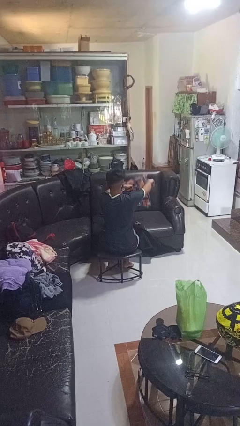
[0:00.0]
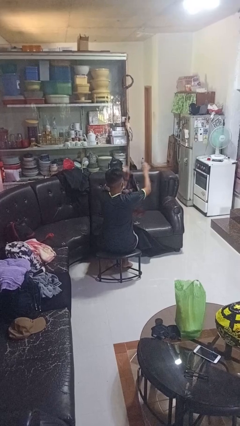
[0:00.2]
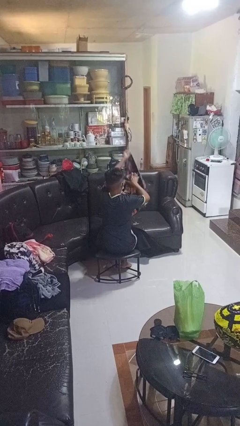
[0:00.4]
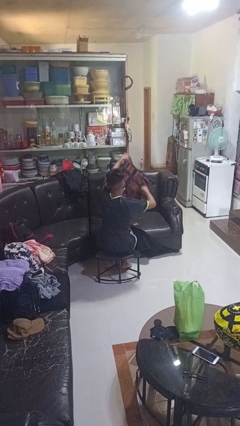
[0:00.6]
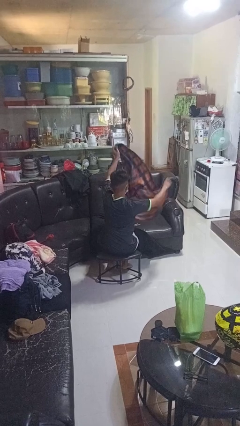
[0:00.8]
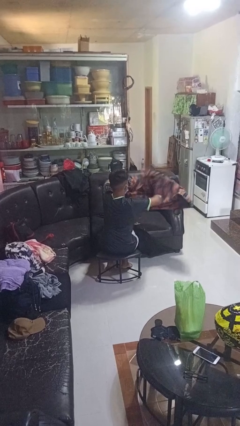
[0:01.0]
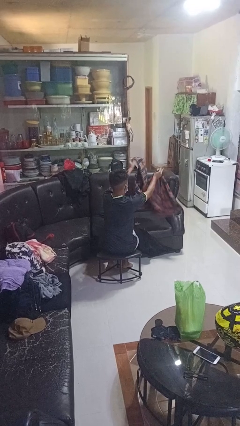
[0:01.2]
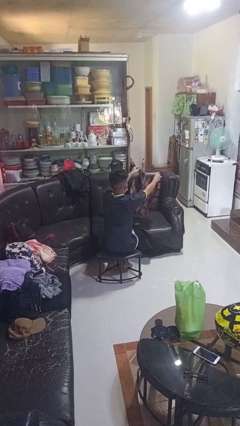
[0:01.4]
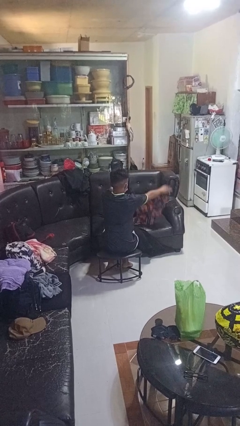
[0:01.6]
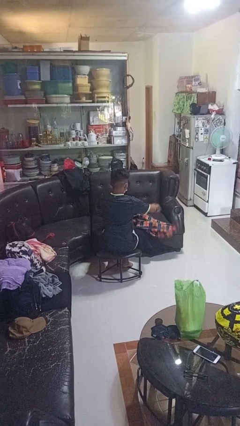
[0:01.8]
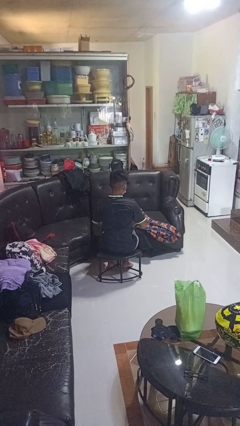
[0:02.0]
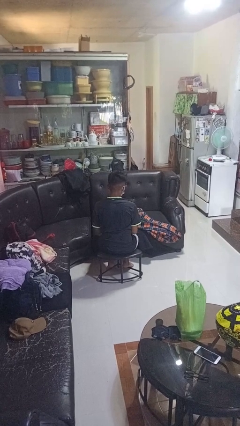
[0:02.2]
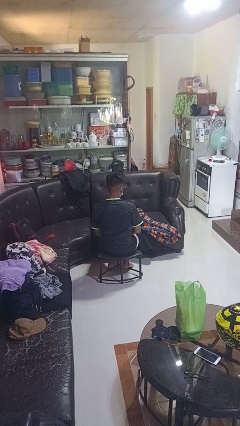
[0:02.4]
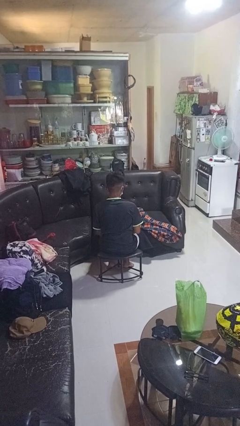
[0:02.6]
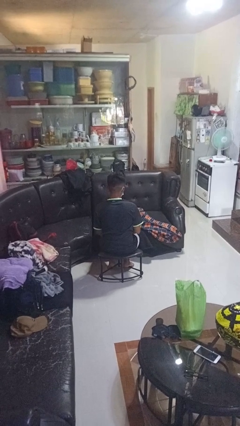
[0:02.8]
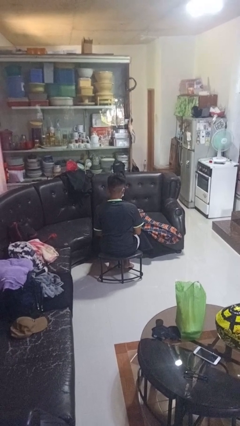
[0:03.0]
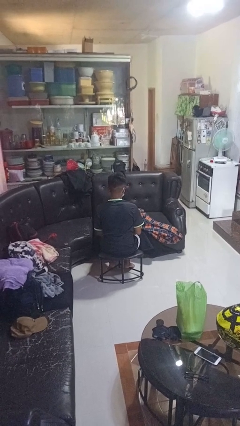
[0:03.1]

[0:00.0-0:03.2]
person unfolds blanket

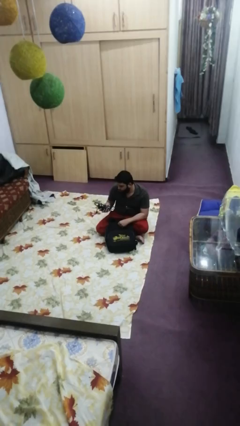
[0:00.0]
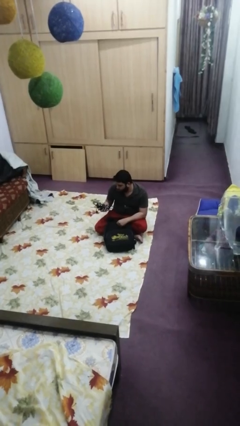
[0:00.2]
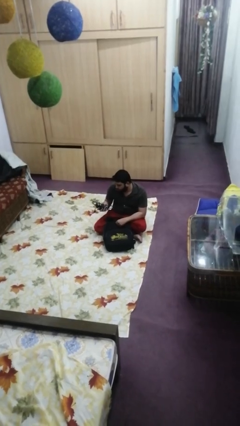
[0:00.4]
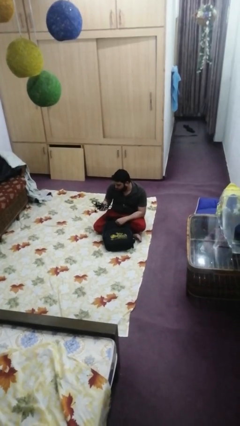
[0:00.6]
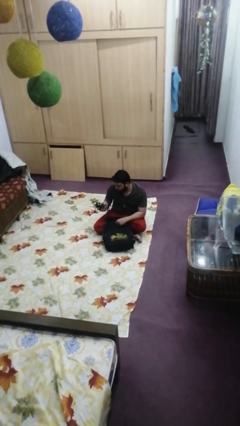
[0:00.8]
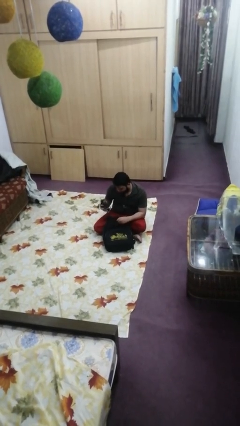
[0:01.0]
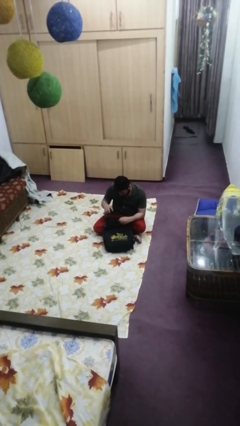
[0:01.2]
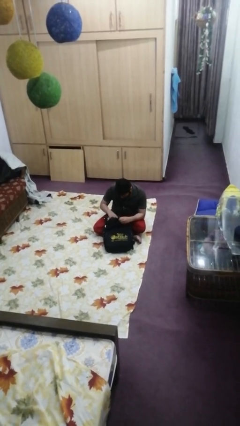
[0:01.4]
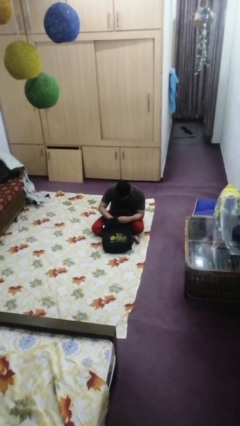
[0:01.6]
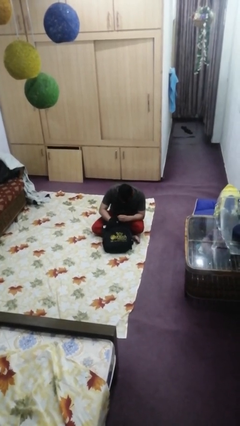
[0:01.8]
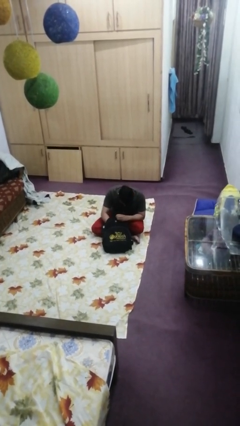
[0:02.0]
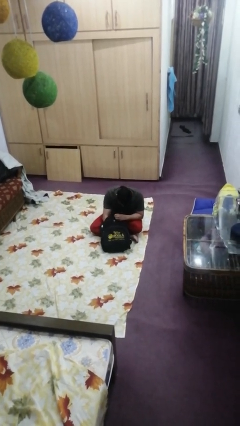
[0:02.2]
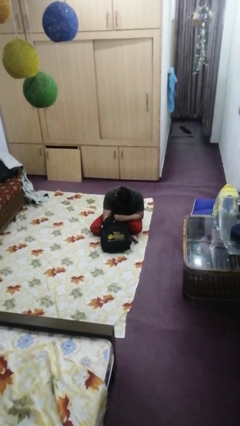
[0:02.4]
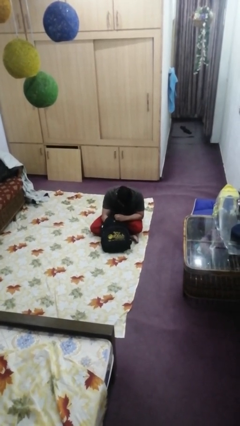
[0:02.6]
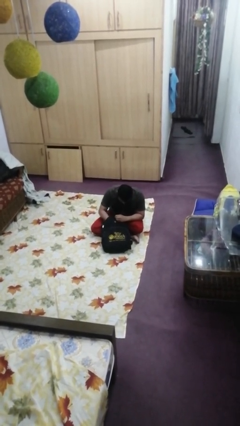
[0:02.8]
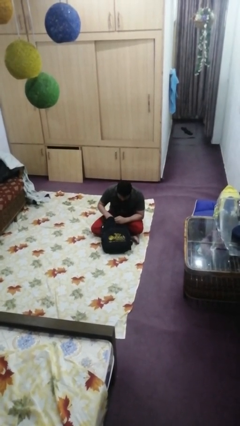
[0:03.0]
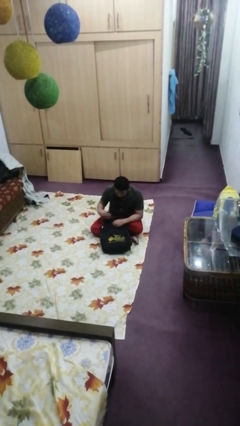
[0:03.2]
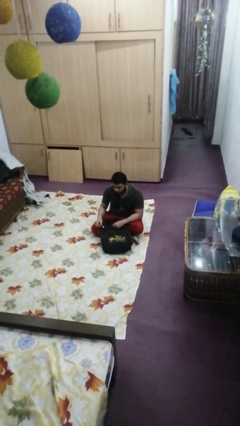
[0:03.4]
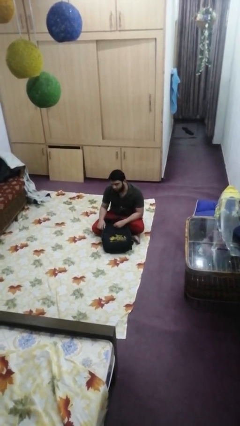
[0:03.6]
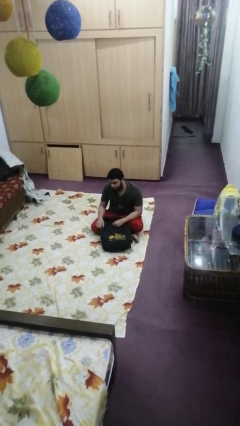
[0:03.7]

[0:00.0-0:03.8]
person puts object into backpack

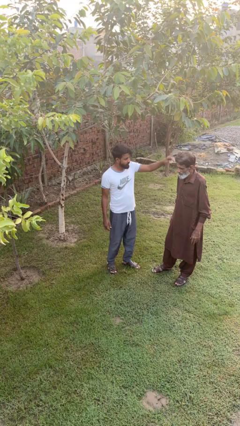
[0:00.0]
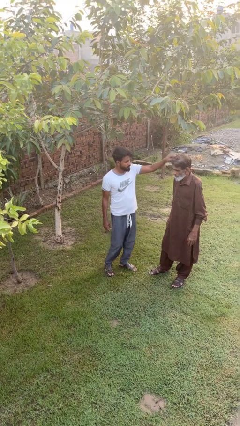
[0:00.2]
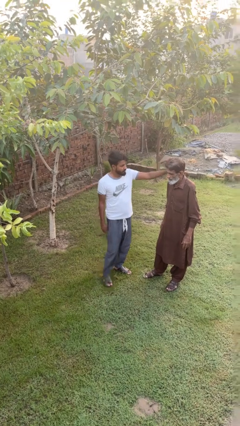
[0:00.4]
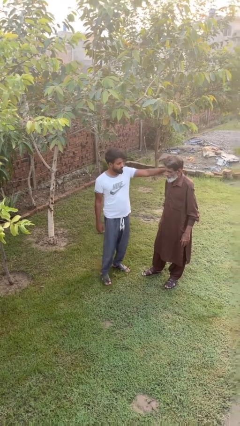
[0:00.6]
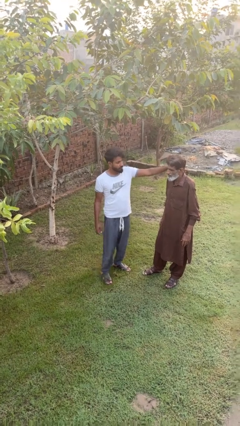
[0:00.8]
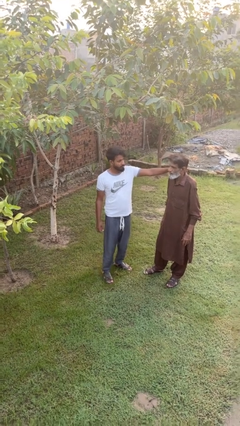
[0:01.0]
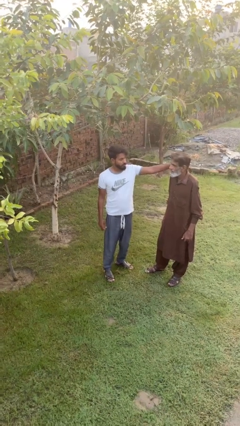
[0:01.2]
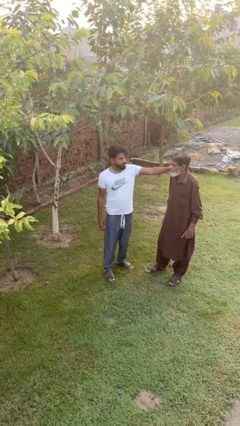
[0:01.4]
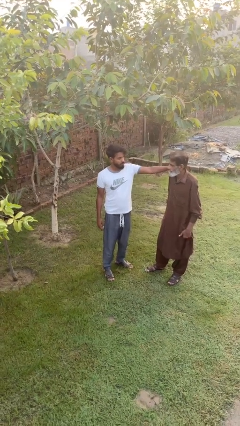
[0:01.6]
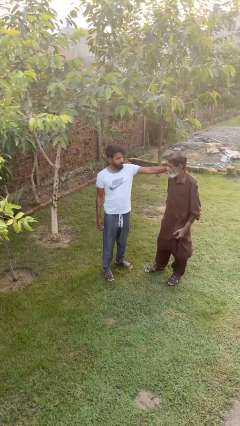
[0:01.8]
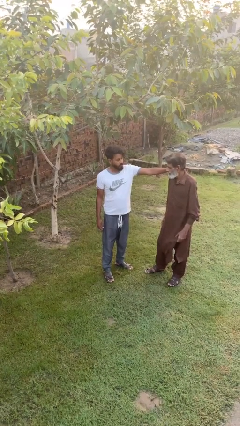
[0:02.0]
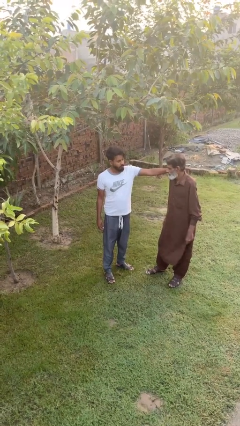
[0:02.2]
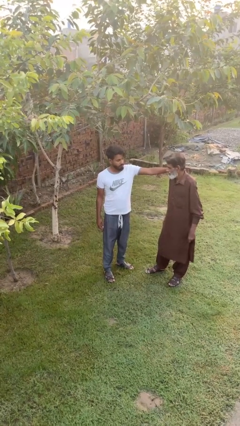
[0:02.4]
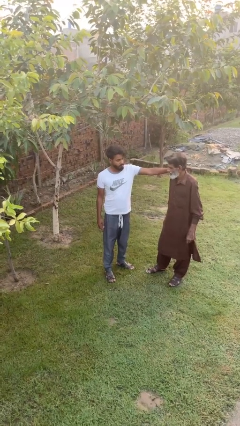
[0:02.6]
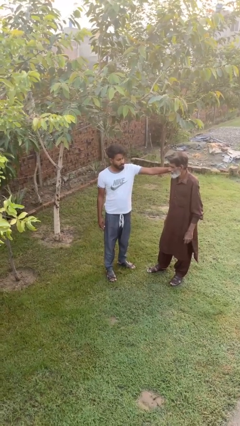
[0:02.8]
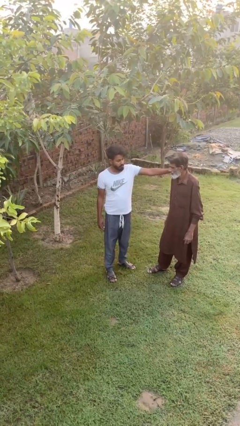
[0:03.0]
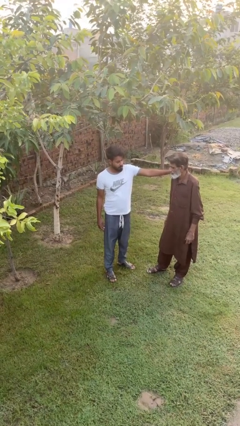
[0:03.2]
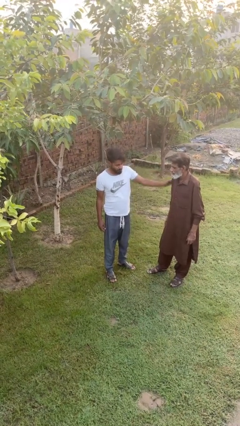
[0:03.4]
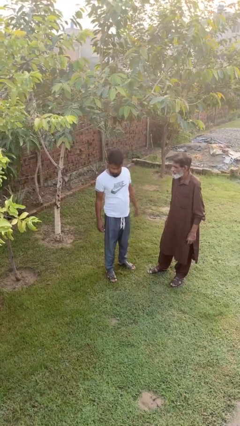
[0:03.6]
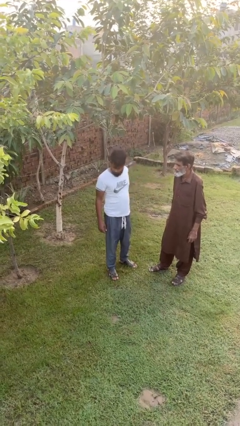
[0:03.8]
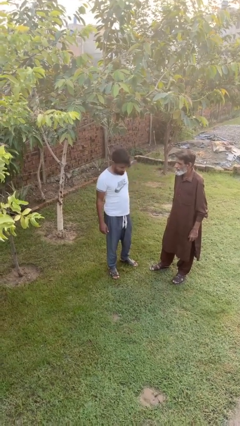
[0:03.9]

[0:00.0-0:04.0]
person pounds shoulders of person

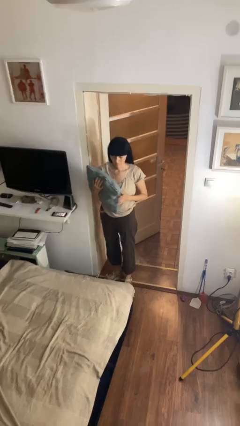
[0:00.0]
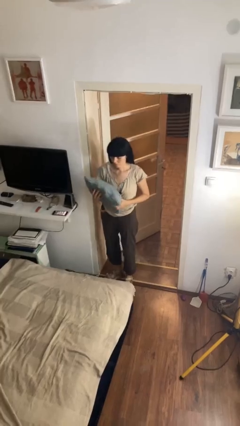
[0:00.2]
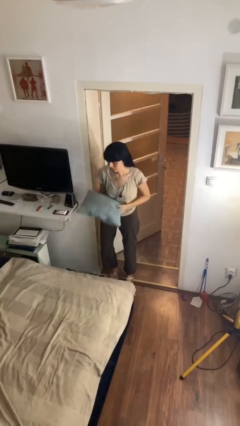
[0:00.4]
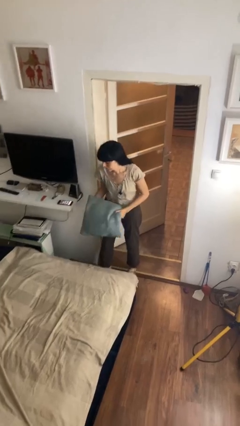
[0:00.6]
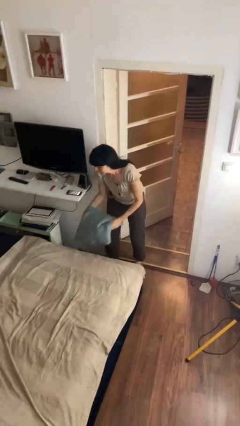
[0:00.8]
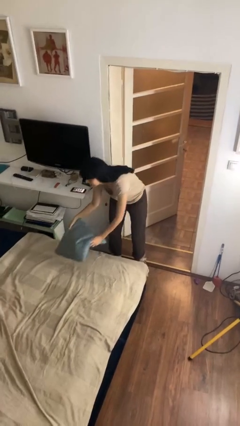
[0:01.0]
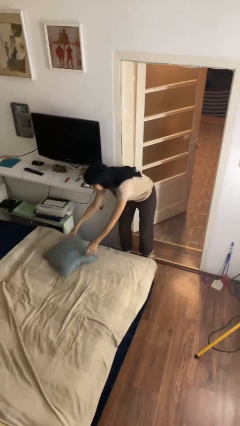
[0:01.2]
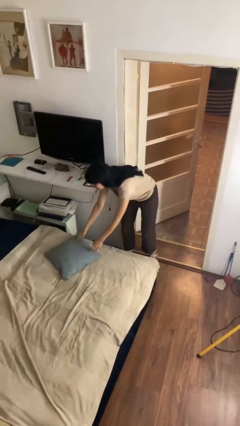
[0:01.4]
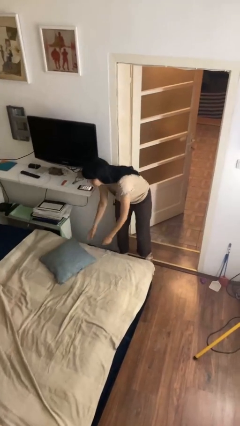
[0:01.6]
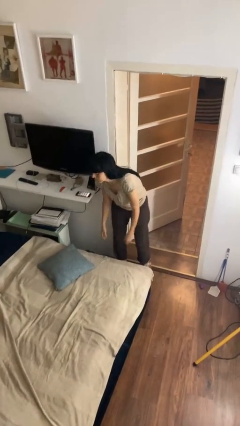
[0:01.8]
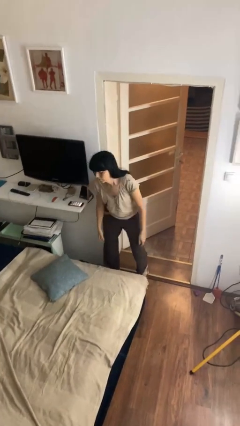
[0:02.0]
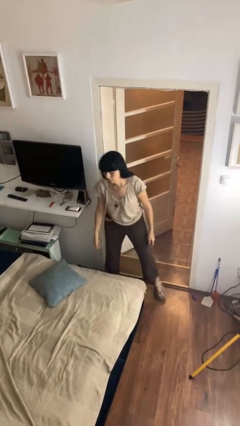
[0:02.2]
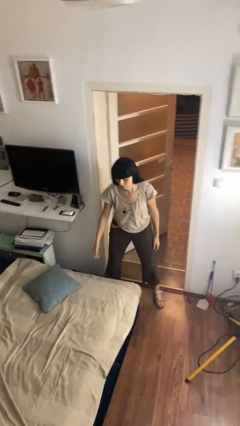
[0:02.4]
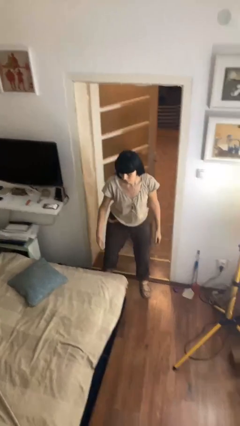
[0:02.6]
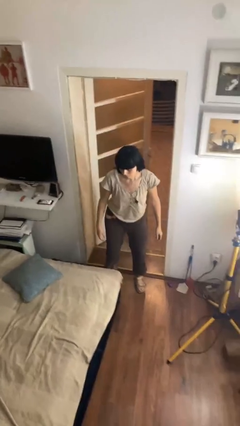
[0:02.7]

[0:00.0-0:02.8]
person puts down object on bed

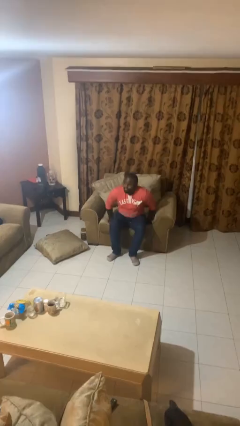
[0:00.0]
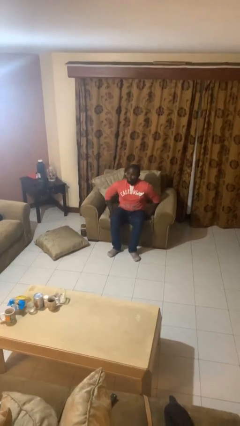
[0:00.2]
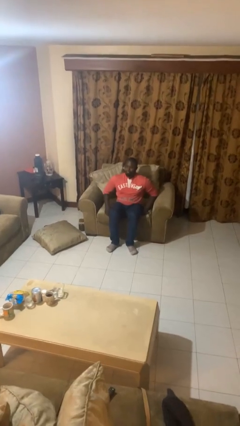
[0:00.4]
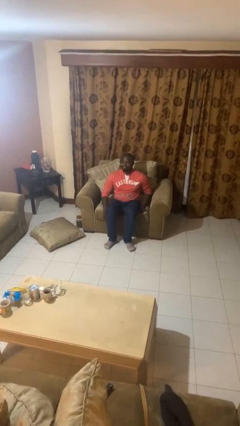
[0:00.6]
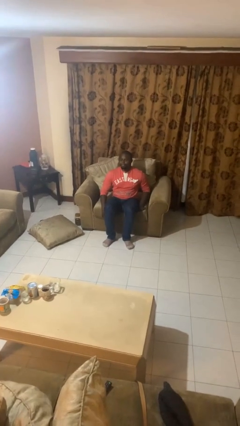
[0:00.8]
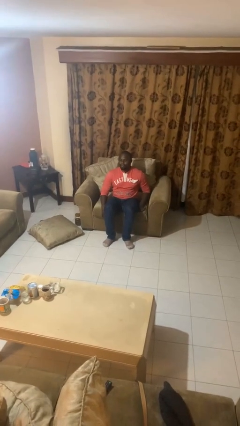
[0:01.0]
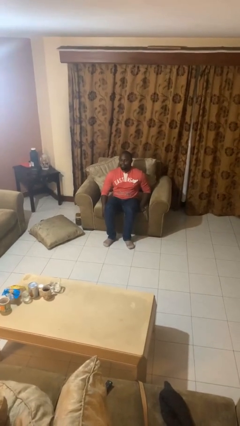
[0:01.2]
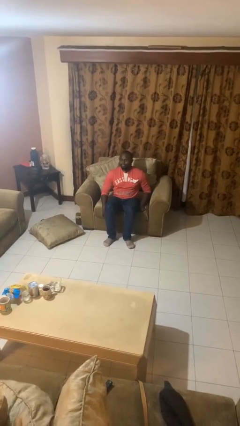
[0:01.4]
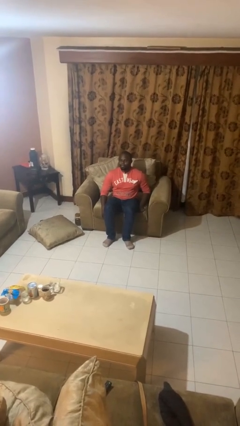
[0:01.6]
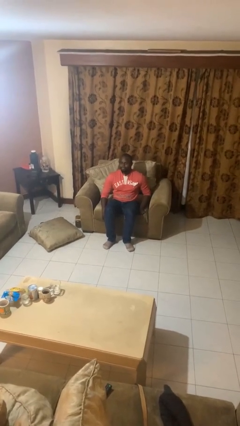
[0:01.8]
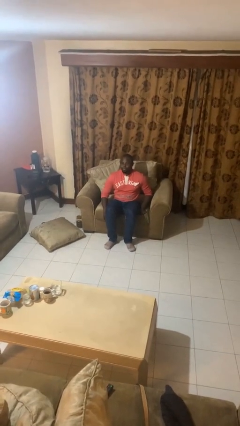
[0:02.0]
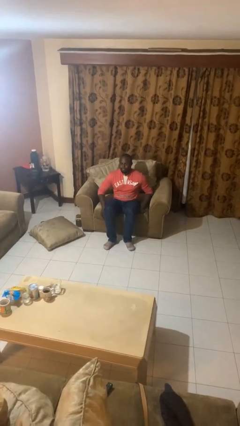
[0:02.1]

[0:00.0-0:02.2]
person sits down

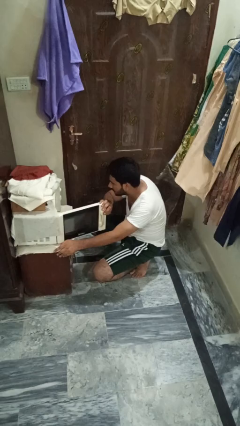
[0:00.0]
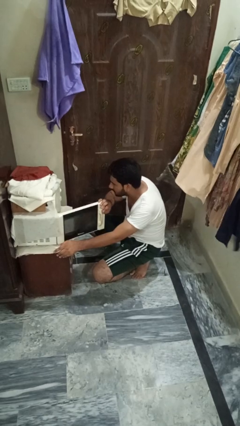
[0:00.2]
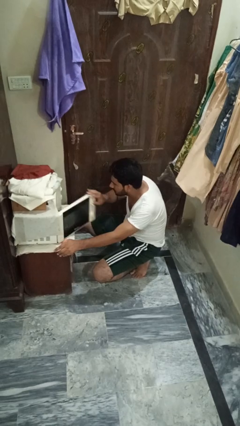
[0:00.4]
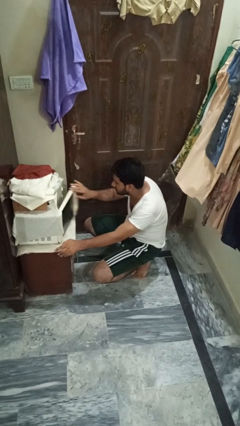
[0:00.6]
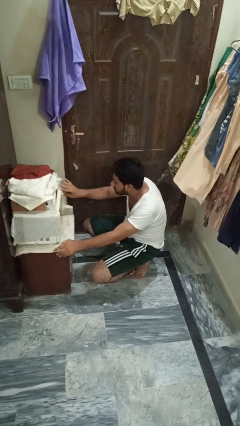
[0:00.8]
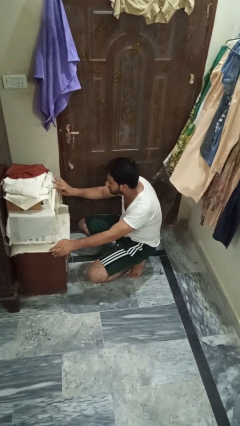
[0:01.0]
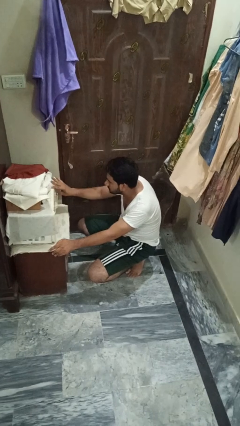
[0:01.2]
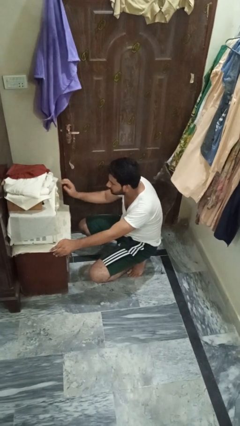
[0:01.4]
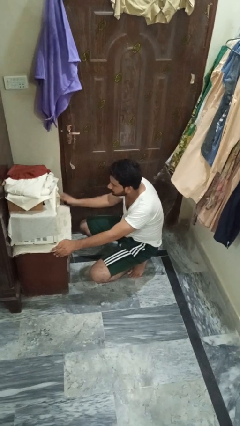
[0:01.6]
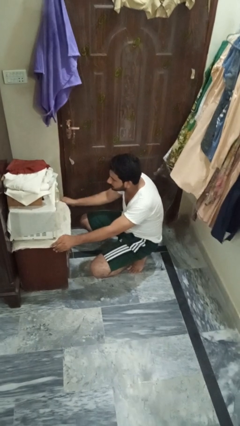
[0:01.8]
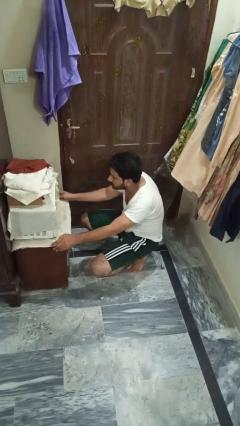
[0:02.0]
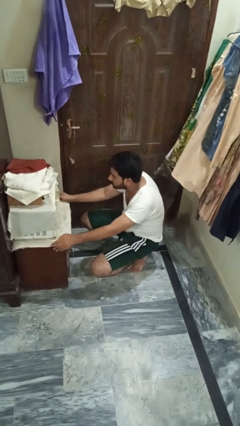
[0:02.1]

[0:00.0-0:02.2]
person closes oven door
